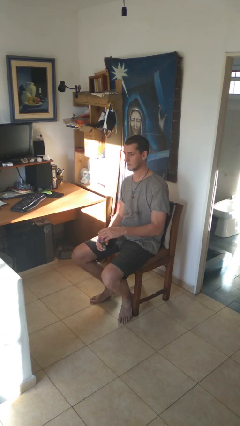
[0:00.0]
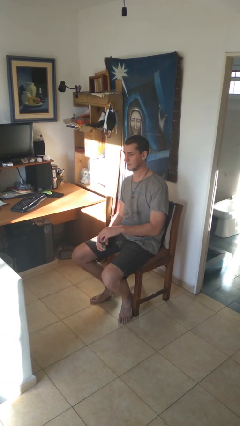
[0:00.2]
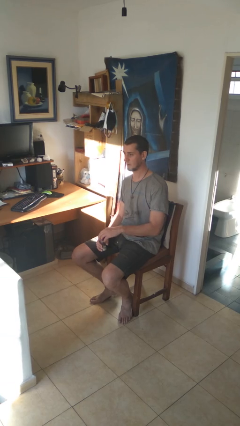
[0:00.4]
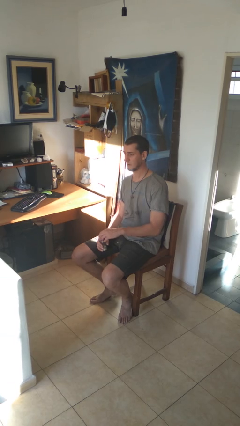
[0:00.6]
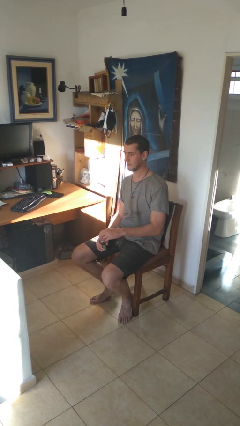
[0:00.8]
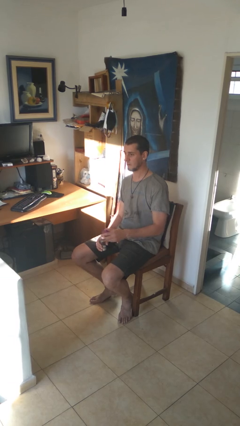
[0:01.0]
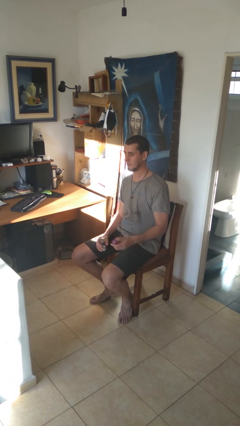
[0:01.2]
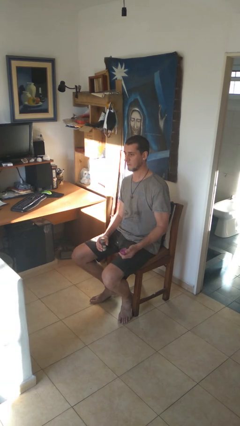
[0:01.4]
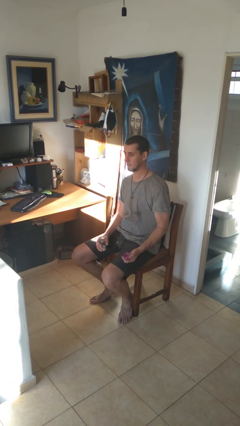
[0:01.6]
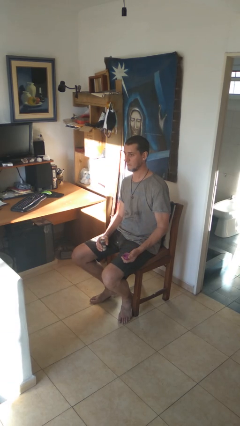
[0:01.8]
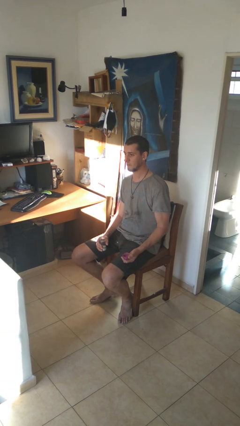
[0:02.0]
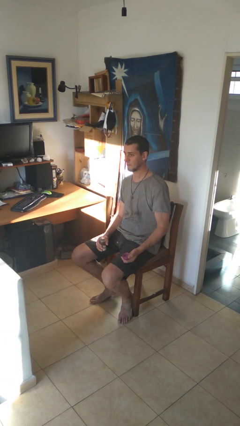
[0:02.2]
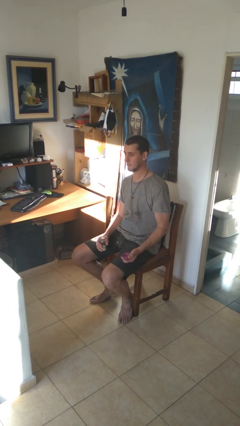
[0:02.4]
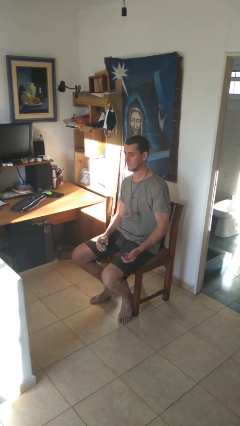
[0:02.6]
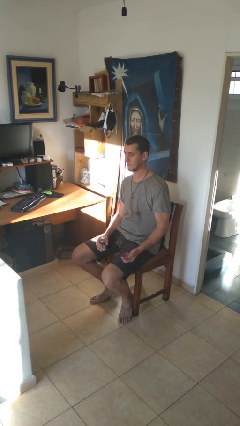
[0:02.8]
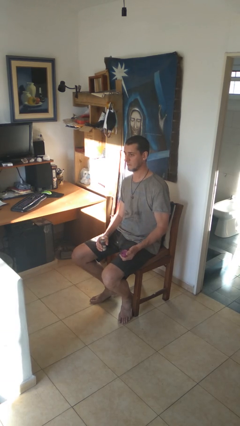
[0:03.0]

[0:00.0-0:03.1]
person opens jar

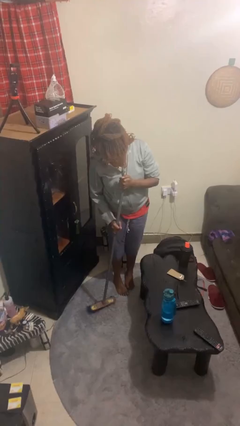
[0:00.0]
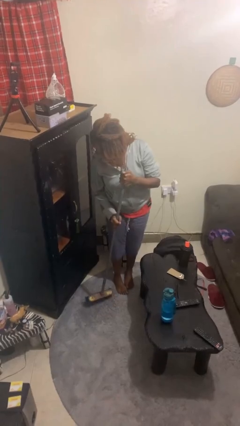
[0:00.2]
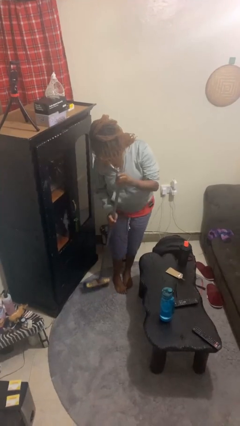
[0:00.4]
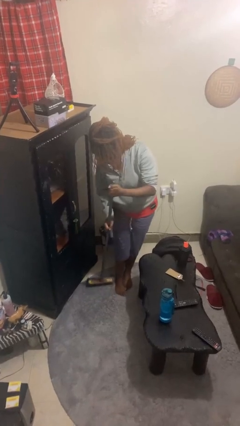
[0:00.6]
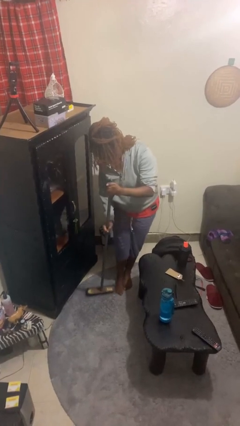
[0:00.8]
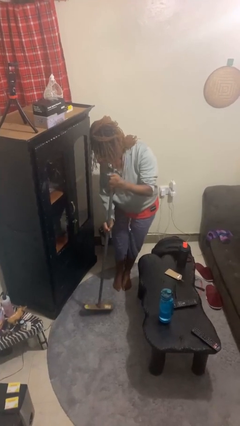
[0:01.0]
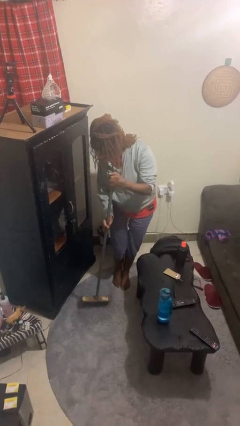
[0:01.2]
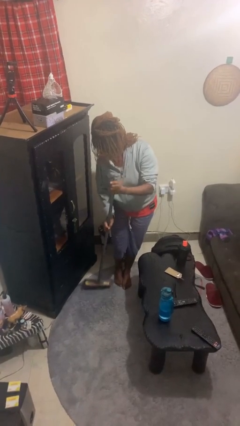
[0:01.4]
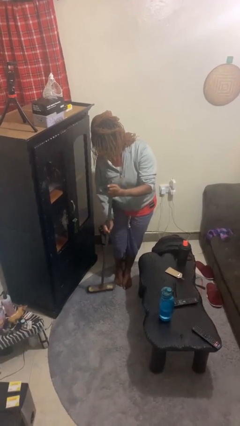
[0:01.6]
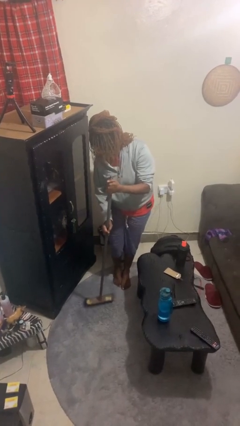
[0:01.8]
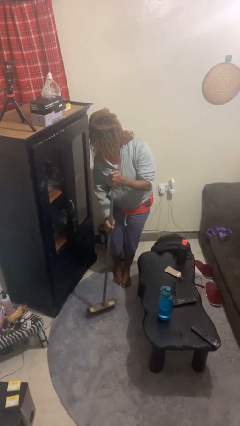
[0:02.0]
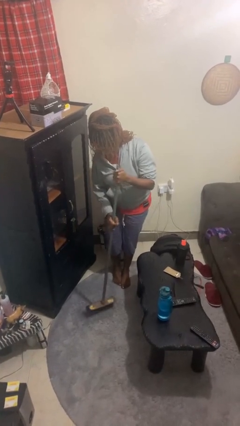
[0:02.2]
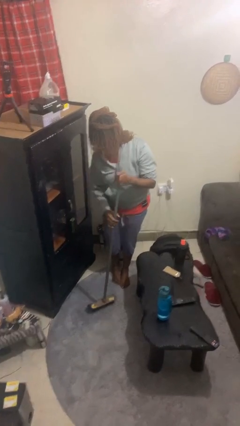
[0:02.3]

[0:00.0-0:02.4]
person sweeps floor

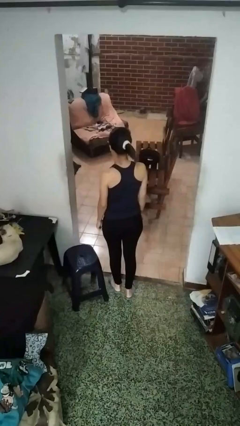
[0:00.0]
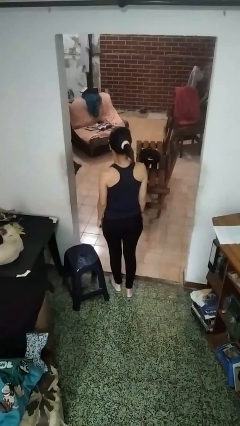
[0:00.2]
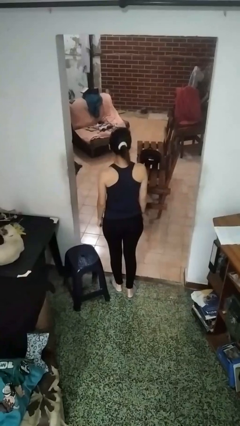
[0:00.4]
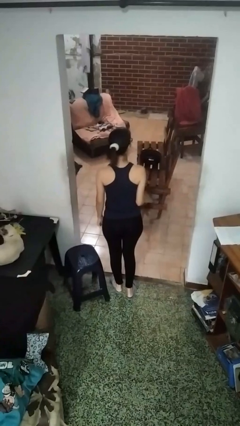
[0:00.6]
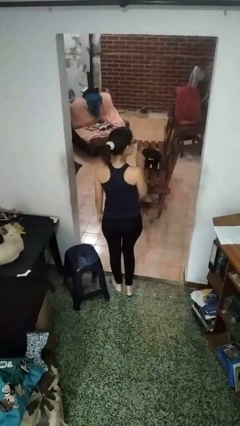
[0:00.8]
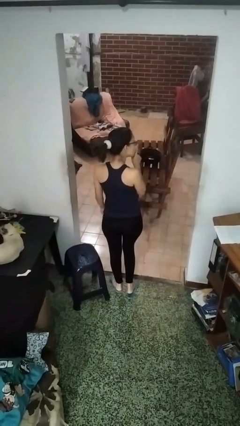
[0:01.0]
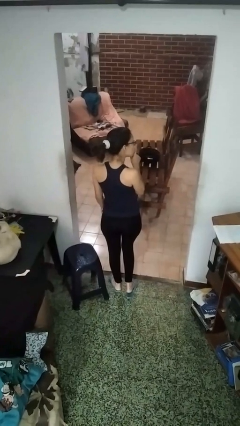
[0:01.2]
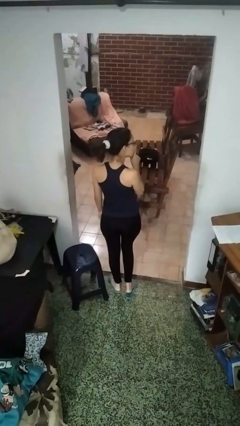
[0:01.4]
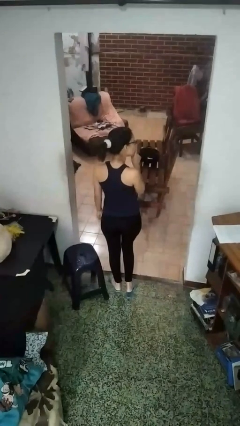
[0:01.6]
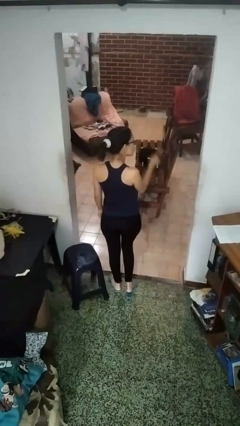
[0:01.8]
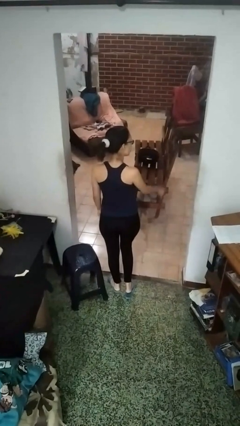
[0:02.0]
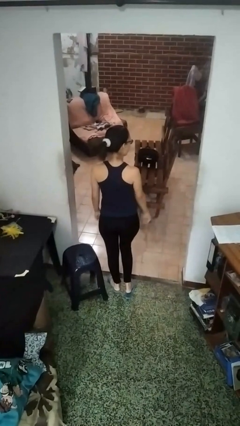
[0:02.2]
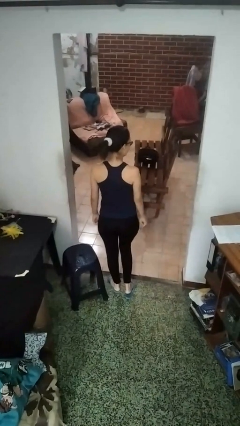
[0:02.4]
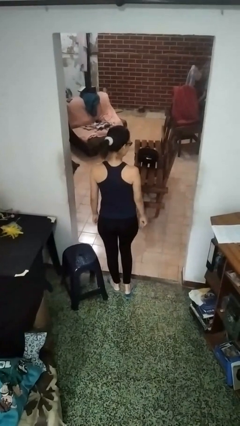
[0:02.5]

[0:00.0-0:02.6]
person gestures be quiet

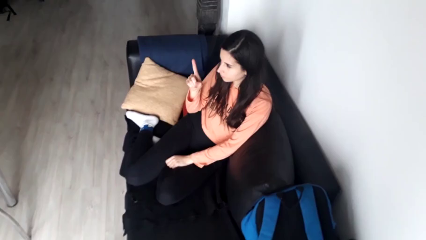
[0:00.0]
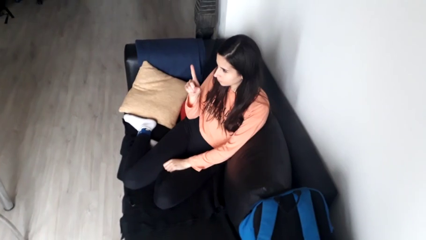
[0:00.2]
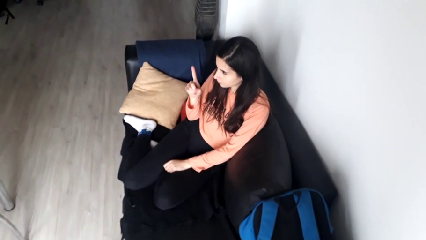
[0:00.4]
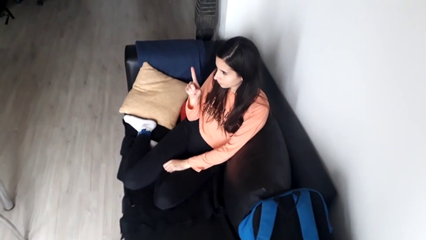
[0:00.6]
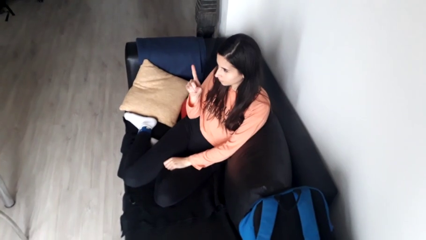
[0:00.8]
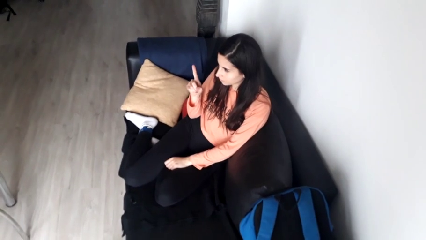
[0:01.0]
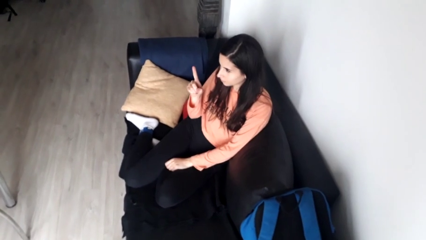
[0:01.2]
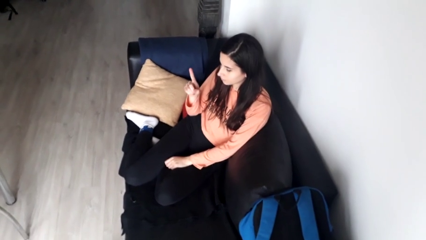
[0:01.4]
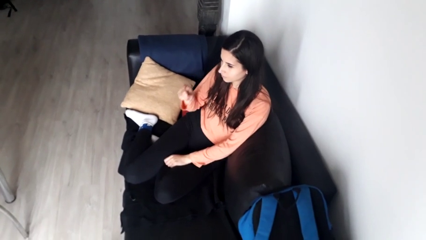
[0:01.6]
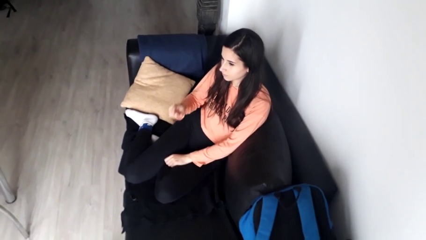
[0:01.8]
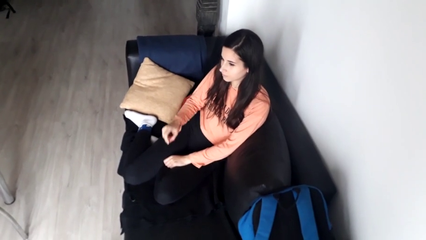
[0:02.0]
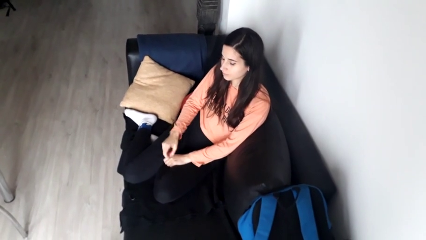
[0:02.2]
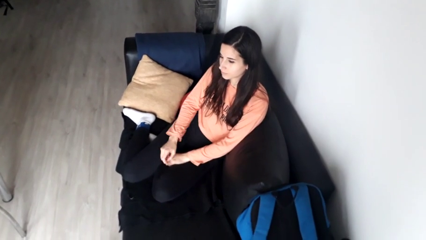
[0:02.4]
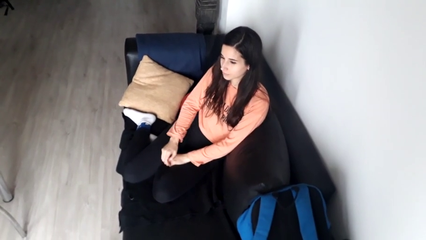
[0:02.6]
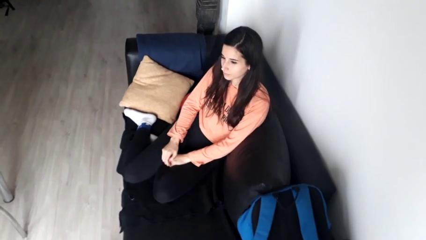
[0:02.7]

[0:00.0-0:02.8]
person gestures number one

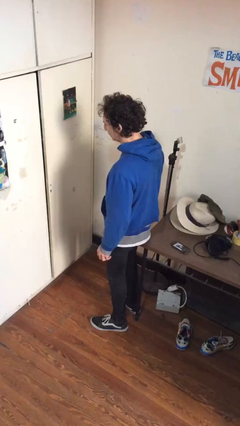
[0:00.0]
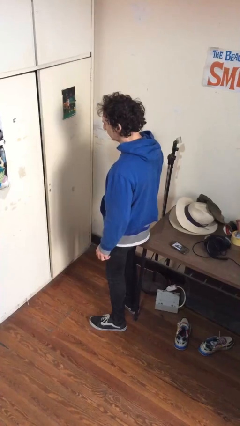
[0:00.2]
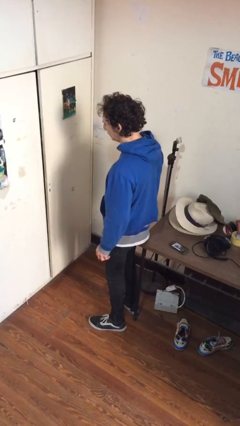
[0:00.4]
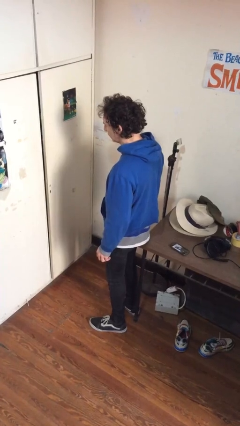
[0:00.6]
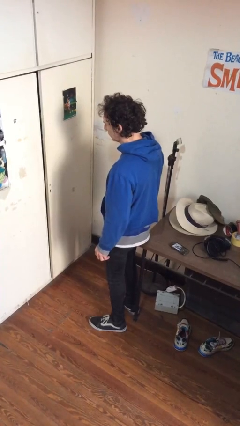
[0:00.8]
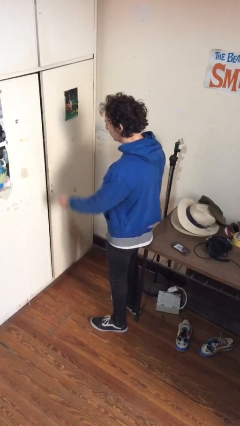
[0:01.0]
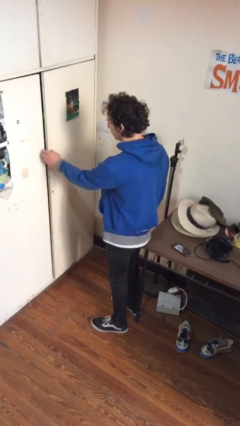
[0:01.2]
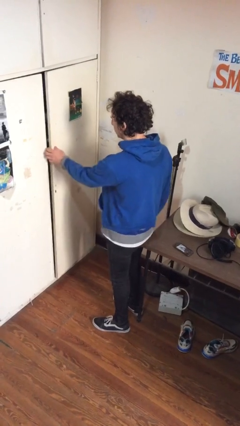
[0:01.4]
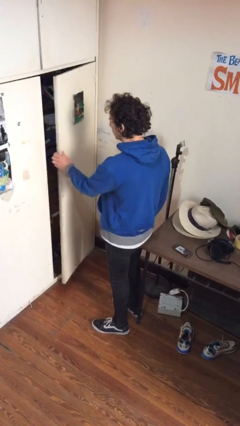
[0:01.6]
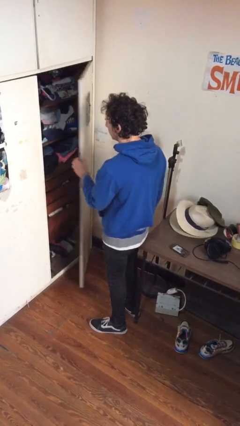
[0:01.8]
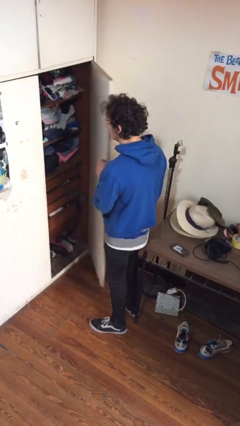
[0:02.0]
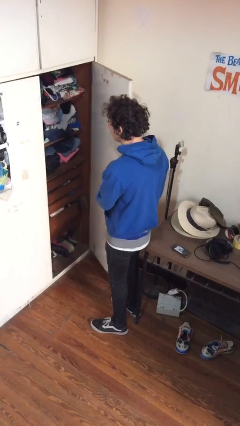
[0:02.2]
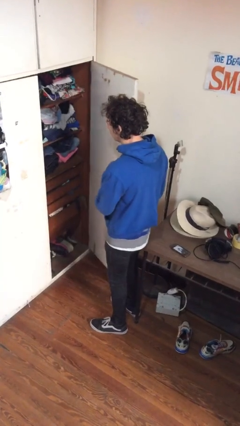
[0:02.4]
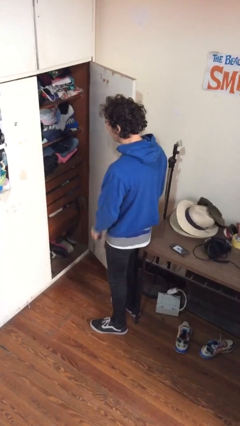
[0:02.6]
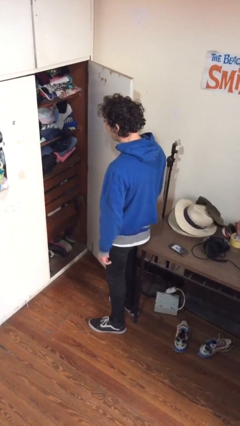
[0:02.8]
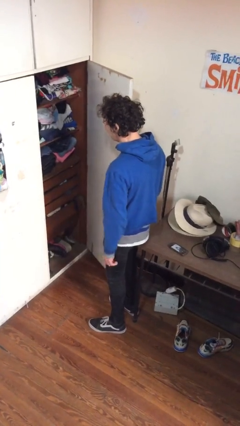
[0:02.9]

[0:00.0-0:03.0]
person opens closet door

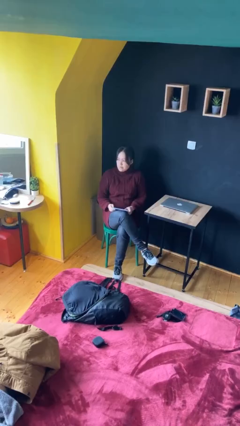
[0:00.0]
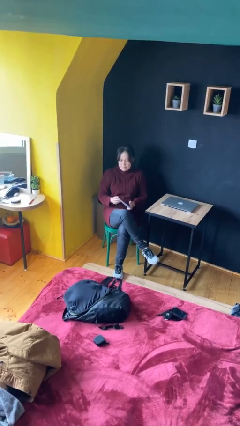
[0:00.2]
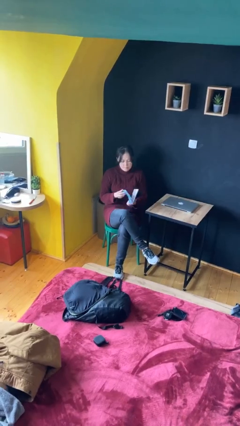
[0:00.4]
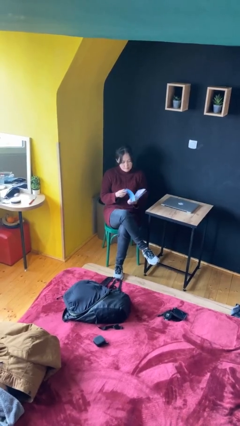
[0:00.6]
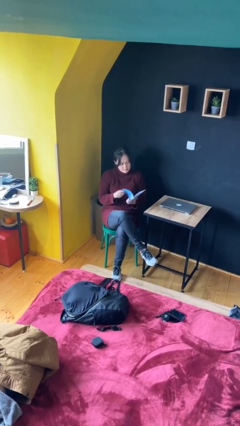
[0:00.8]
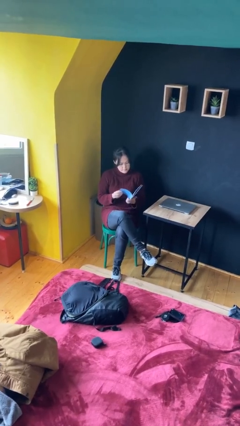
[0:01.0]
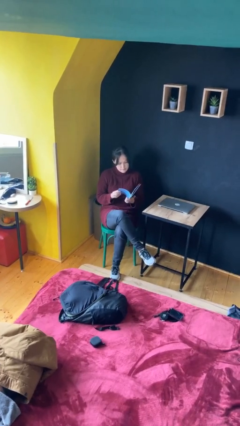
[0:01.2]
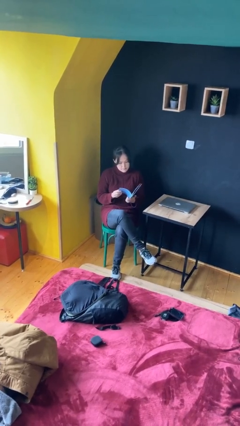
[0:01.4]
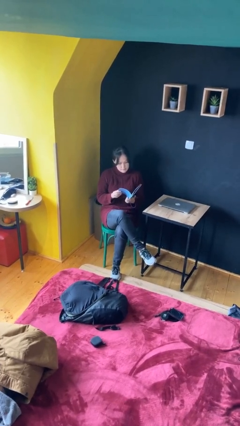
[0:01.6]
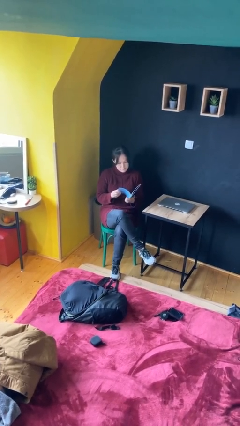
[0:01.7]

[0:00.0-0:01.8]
person reads document

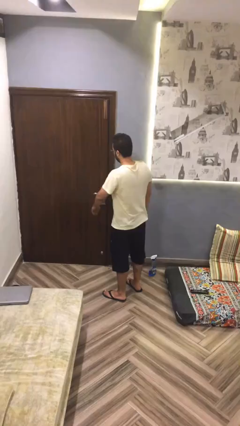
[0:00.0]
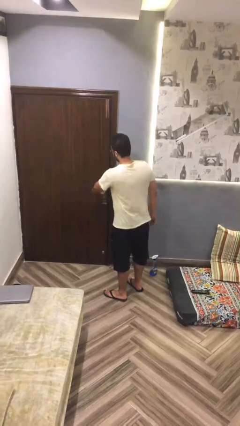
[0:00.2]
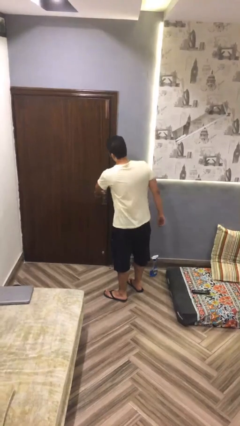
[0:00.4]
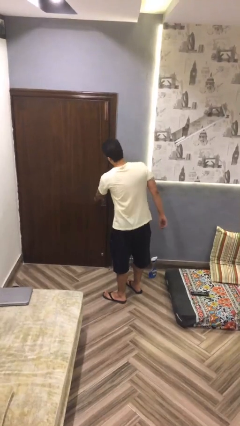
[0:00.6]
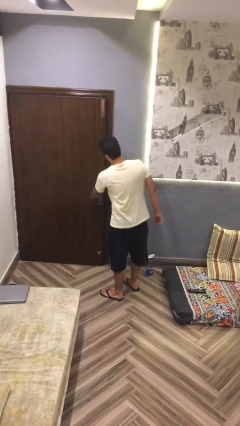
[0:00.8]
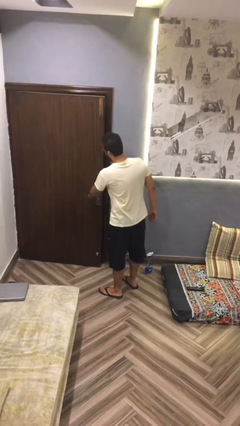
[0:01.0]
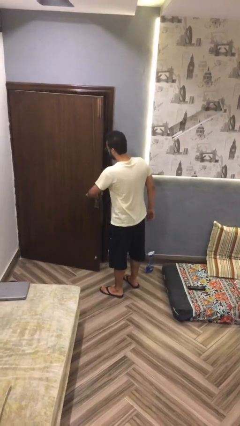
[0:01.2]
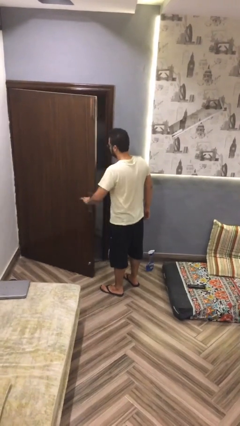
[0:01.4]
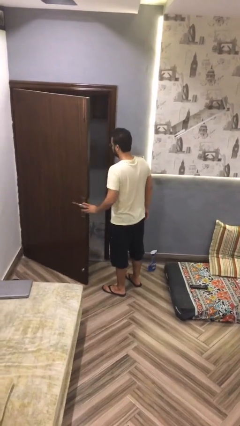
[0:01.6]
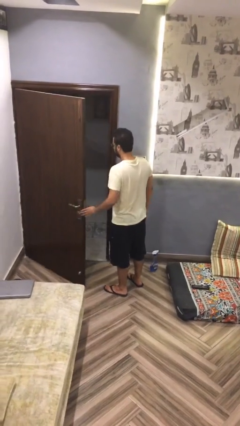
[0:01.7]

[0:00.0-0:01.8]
person opens facility door
